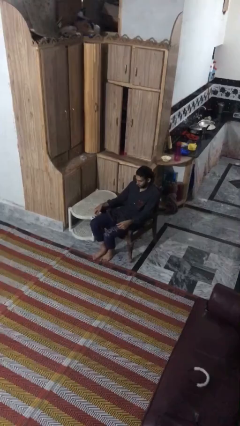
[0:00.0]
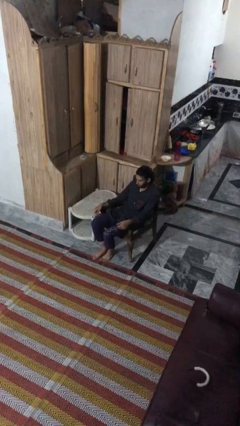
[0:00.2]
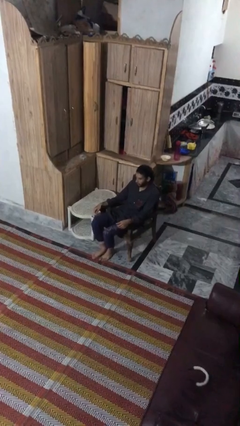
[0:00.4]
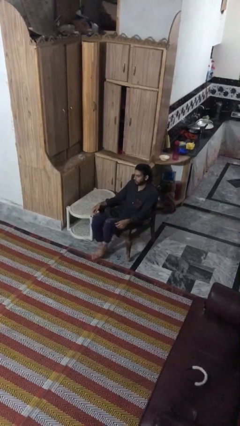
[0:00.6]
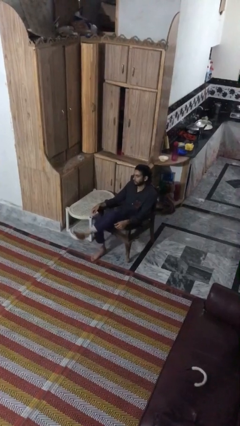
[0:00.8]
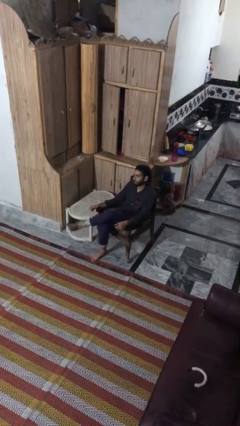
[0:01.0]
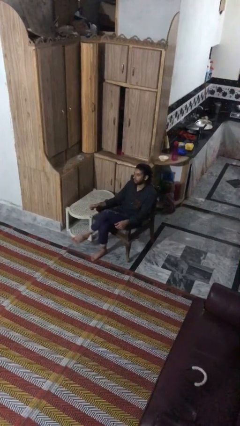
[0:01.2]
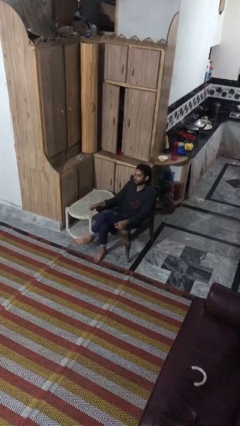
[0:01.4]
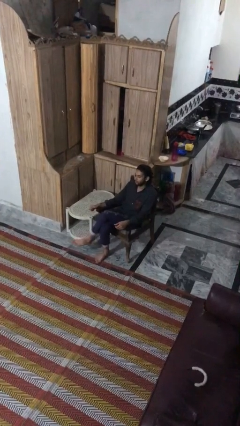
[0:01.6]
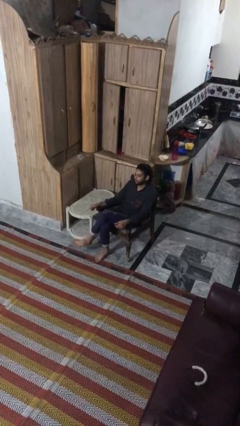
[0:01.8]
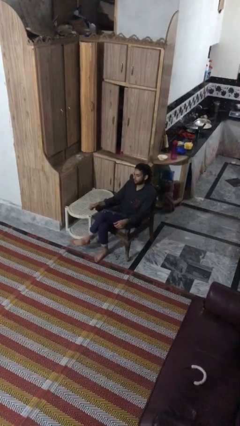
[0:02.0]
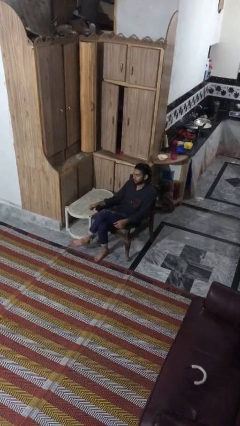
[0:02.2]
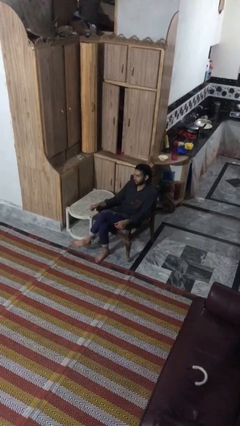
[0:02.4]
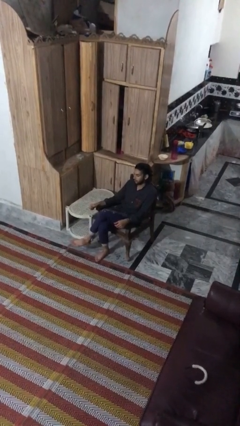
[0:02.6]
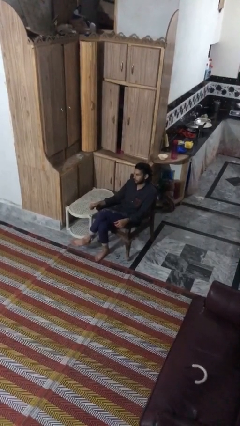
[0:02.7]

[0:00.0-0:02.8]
person crosses legs

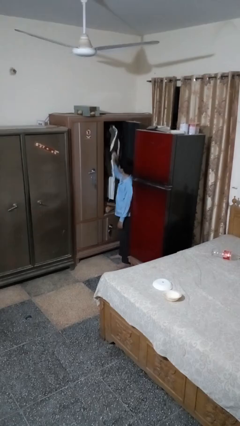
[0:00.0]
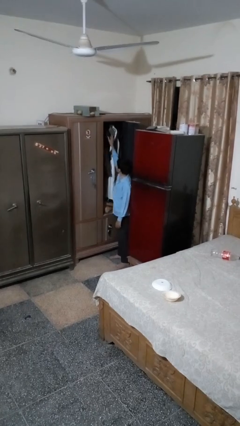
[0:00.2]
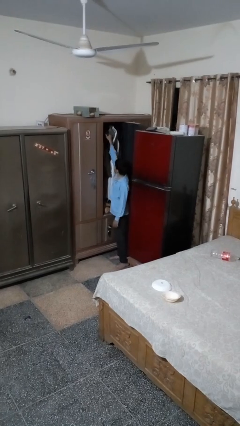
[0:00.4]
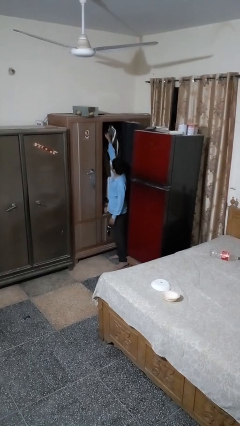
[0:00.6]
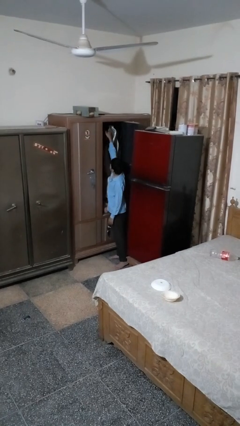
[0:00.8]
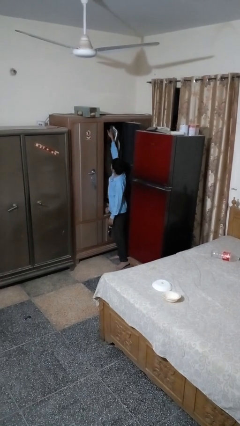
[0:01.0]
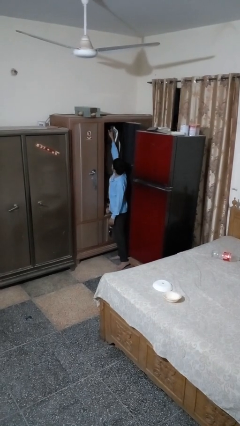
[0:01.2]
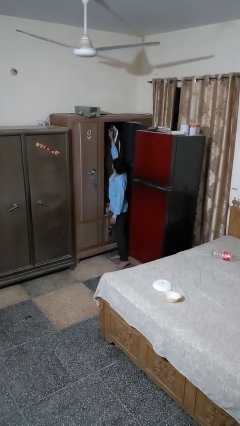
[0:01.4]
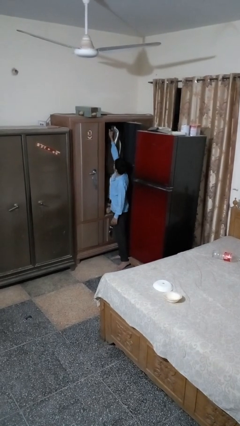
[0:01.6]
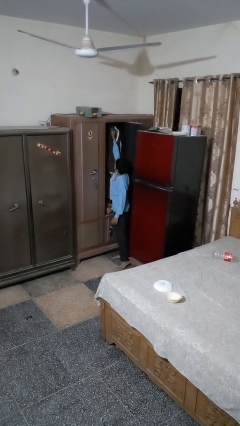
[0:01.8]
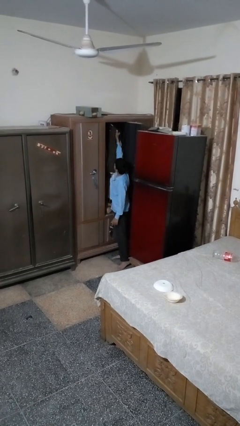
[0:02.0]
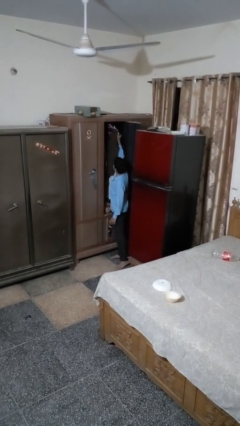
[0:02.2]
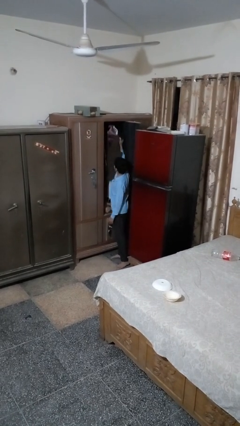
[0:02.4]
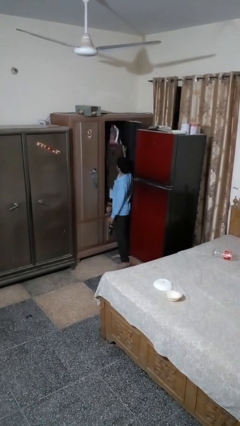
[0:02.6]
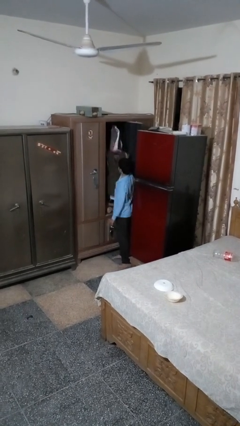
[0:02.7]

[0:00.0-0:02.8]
person takes clothes from closet

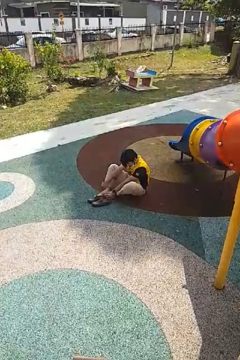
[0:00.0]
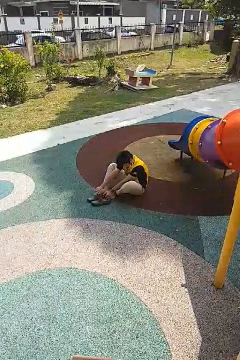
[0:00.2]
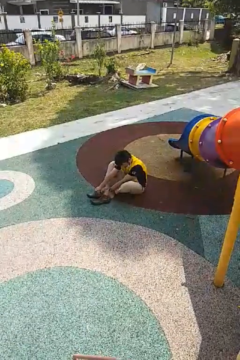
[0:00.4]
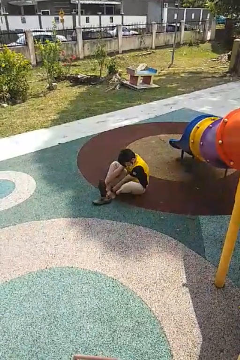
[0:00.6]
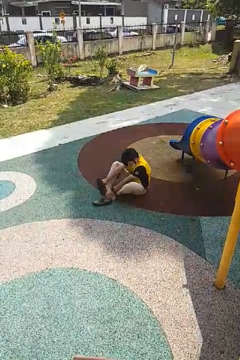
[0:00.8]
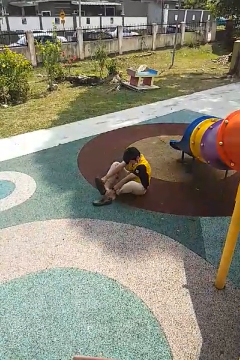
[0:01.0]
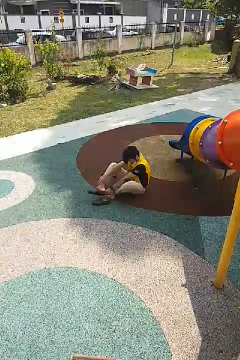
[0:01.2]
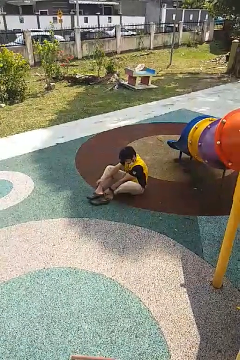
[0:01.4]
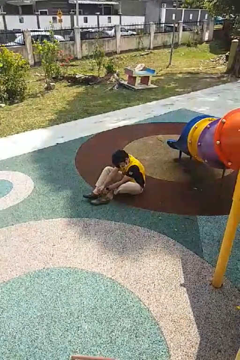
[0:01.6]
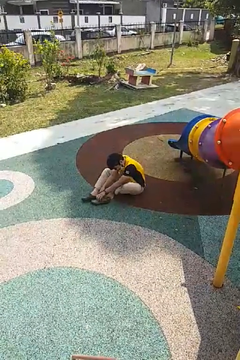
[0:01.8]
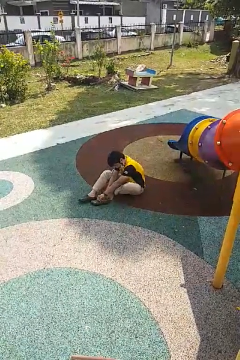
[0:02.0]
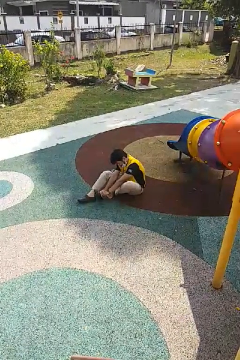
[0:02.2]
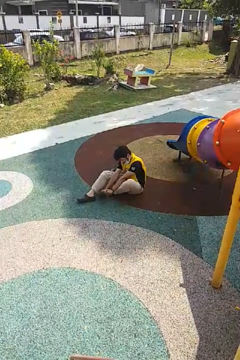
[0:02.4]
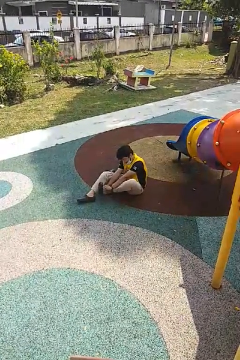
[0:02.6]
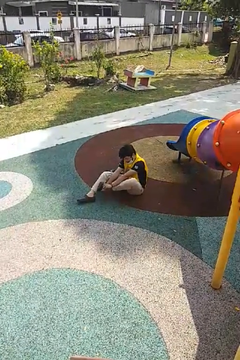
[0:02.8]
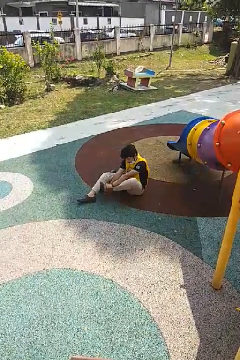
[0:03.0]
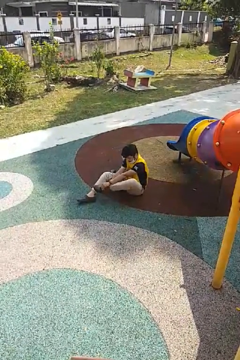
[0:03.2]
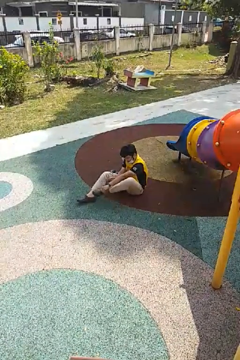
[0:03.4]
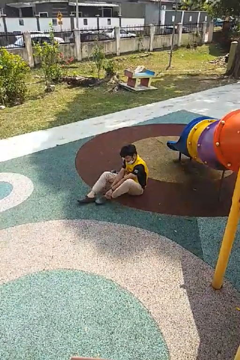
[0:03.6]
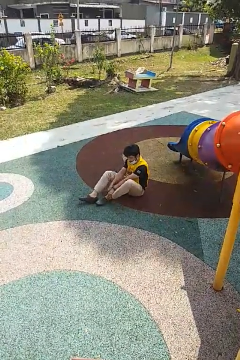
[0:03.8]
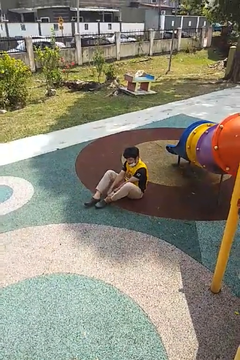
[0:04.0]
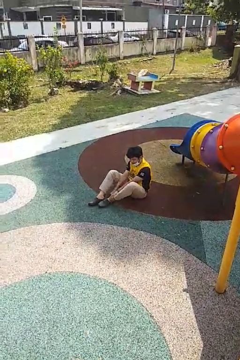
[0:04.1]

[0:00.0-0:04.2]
person puts on shoes

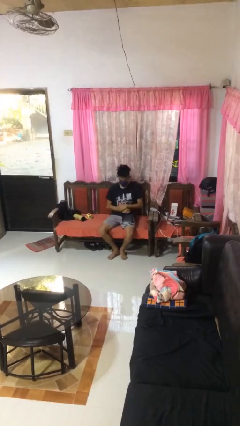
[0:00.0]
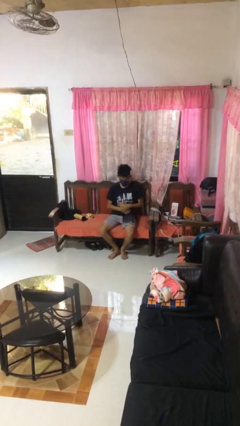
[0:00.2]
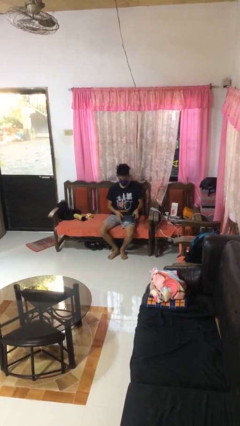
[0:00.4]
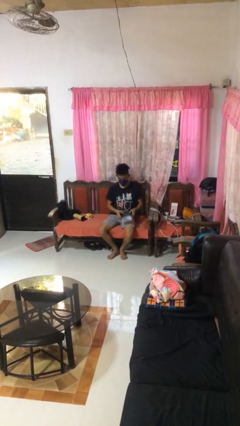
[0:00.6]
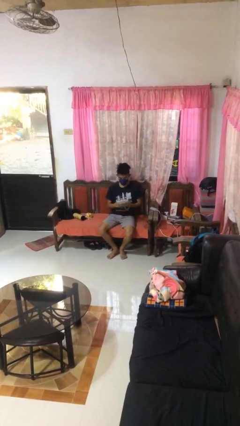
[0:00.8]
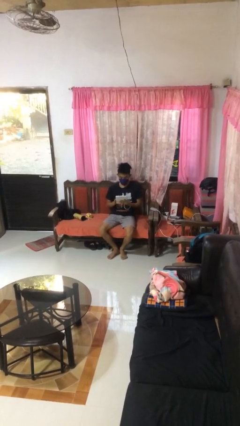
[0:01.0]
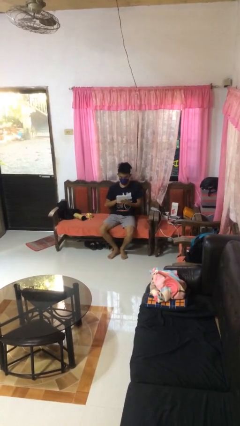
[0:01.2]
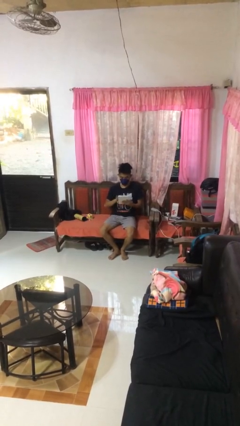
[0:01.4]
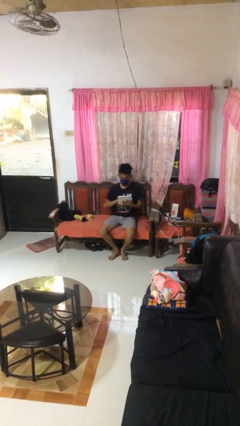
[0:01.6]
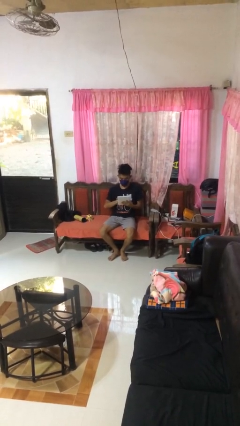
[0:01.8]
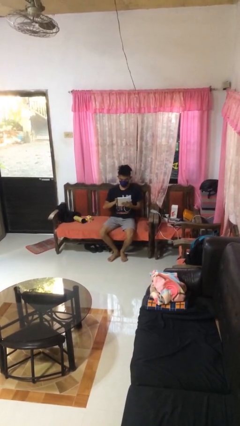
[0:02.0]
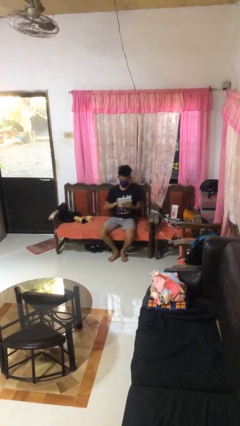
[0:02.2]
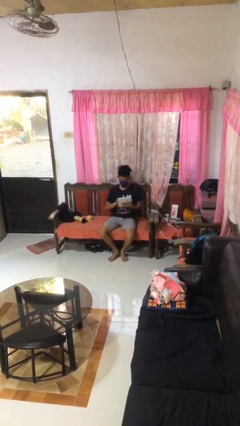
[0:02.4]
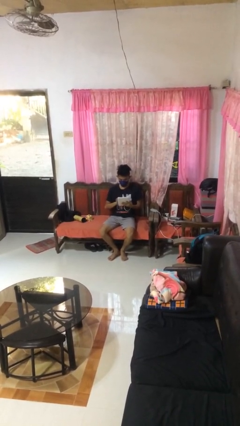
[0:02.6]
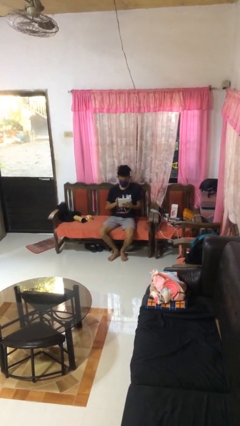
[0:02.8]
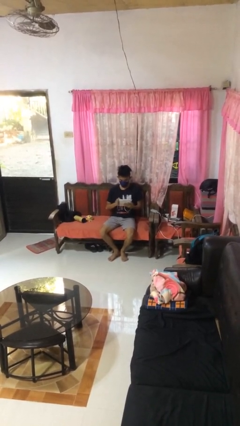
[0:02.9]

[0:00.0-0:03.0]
person interacts with tablet

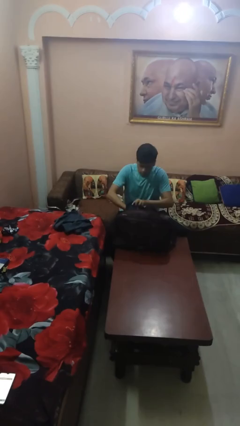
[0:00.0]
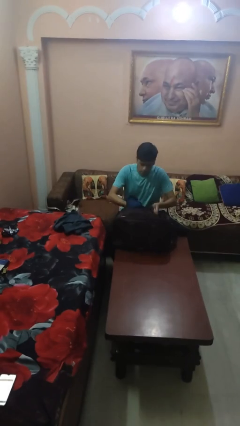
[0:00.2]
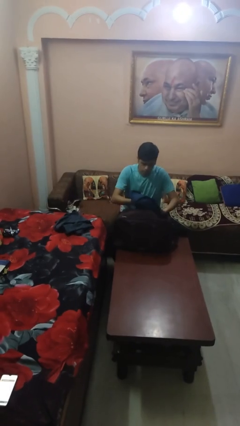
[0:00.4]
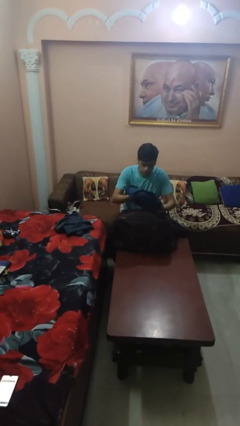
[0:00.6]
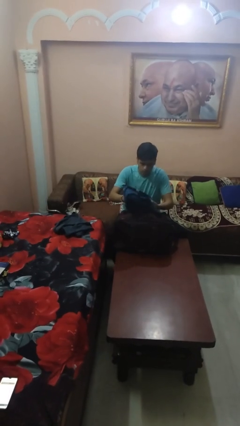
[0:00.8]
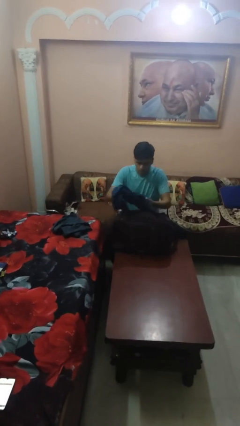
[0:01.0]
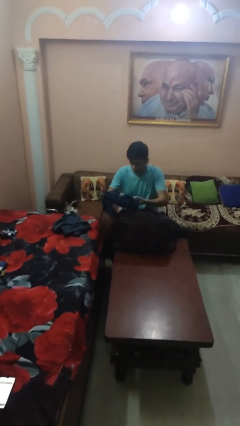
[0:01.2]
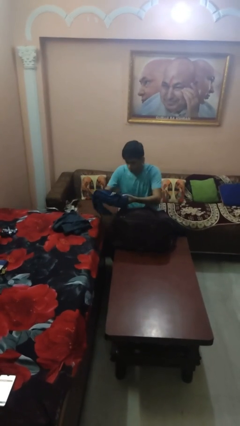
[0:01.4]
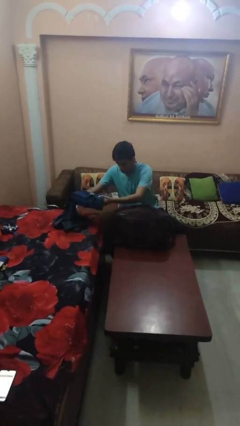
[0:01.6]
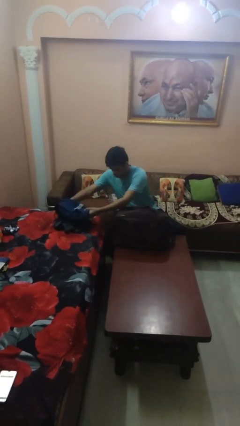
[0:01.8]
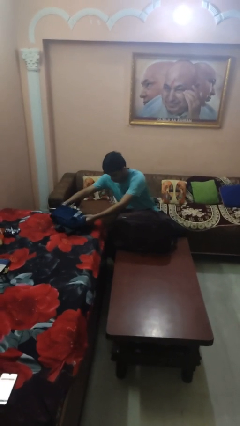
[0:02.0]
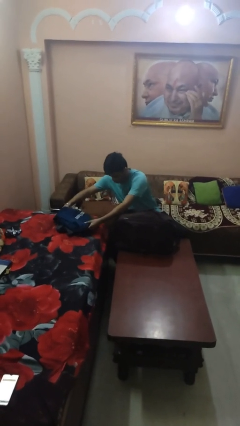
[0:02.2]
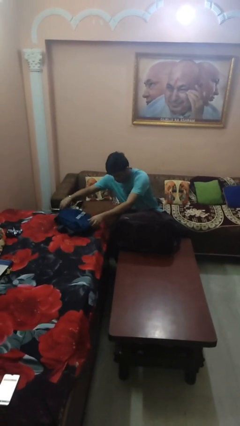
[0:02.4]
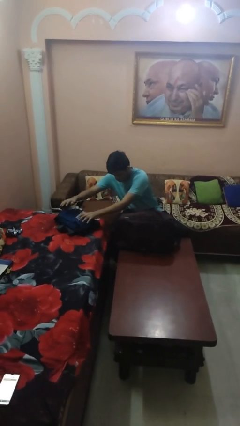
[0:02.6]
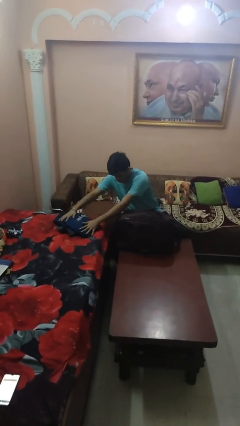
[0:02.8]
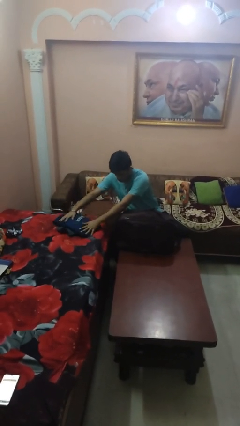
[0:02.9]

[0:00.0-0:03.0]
person unloads clothes from suitcase

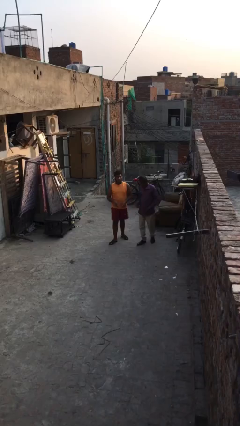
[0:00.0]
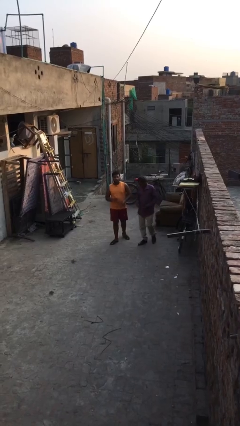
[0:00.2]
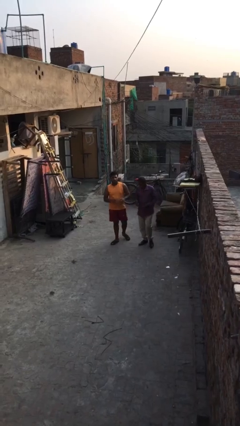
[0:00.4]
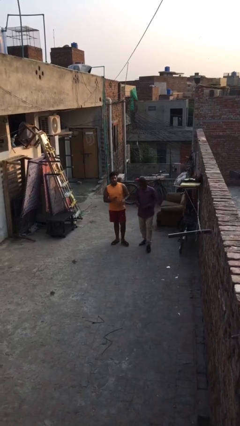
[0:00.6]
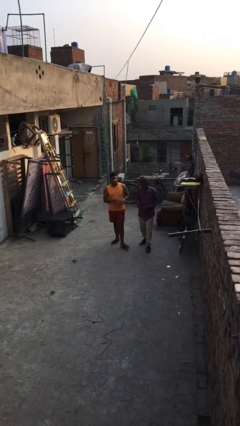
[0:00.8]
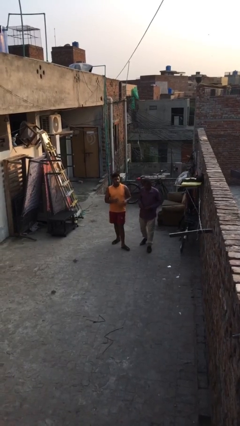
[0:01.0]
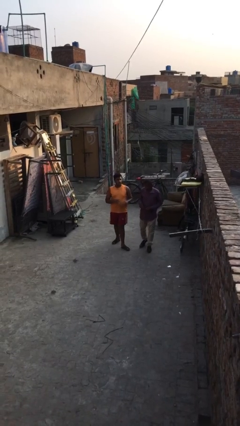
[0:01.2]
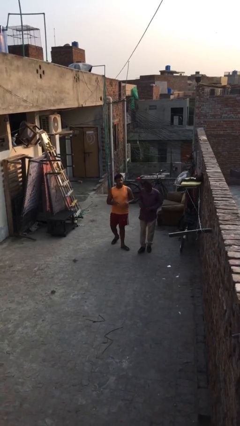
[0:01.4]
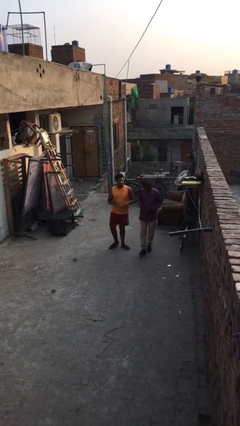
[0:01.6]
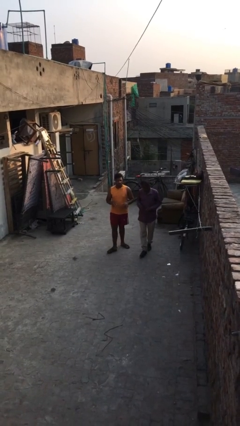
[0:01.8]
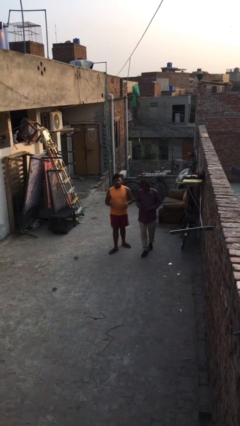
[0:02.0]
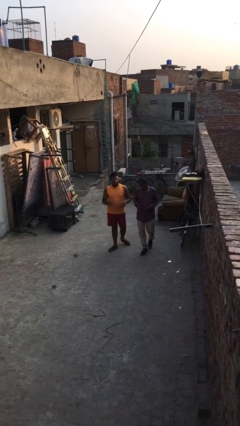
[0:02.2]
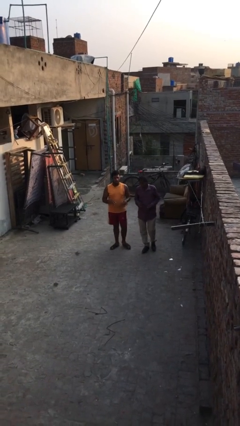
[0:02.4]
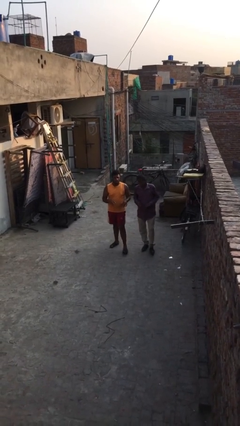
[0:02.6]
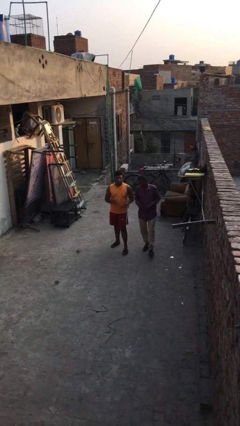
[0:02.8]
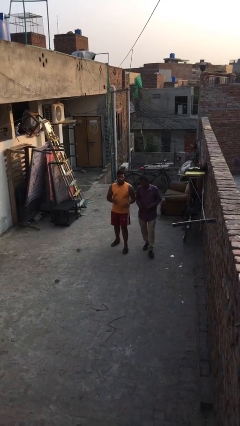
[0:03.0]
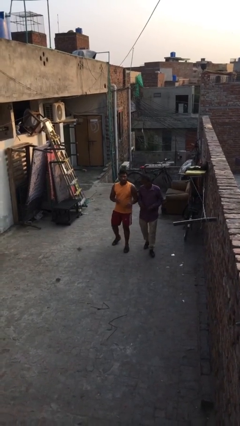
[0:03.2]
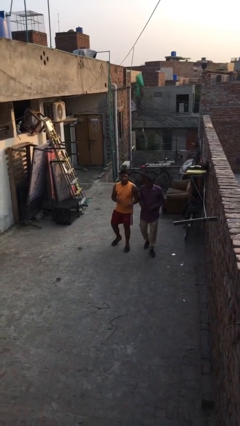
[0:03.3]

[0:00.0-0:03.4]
person talks to person
